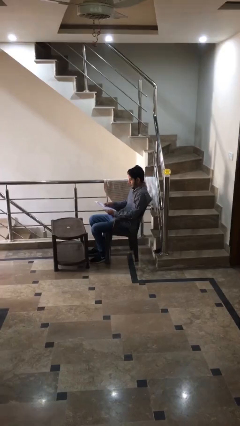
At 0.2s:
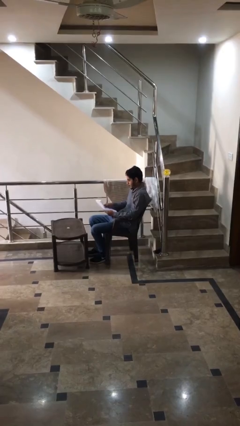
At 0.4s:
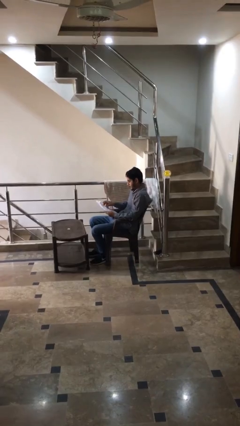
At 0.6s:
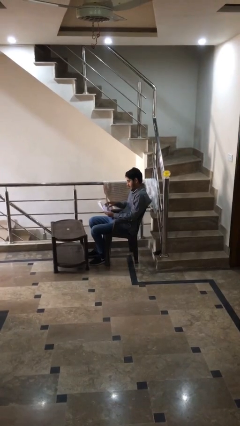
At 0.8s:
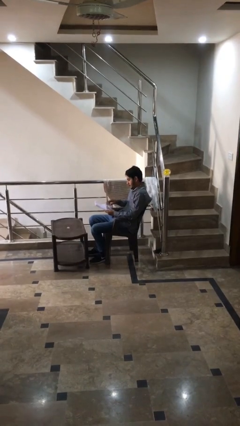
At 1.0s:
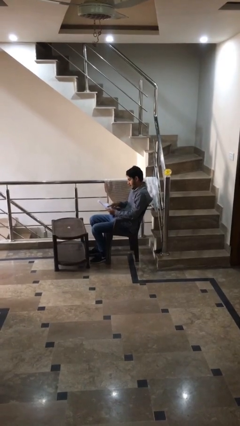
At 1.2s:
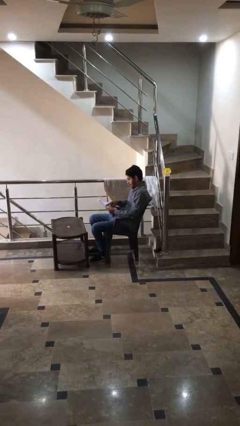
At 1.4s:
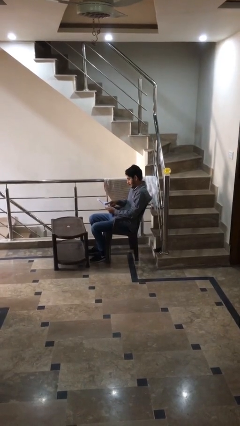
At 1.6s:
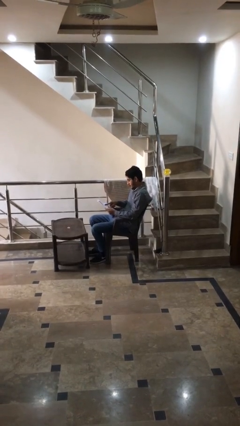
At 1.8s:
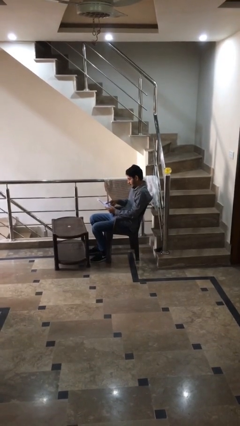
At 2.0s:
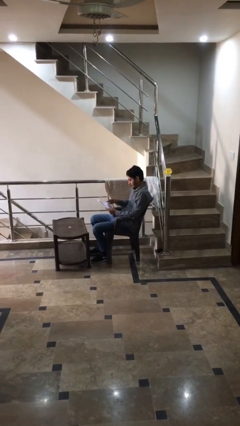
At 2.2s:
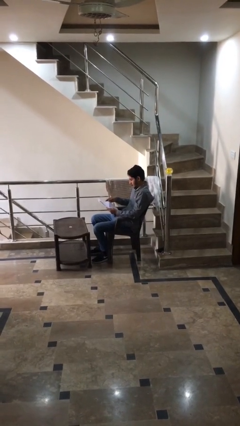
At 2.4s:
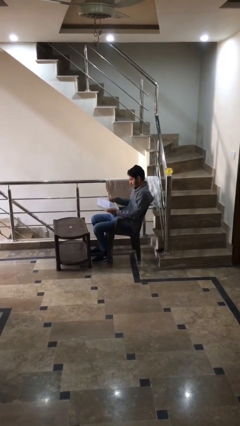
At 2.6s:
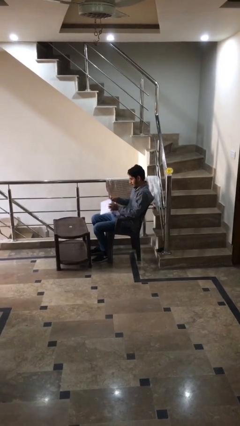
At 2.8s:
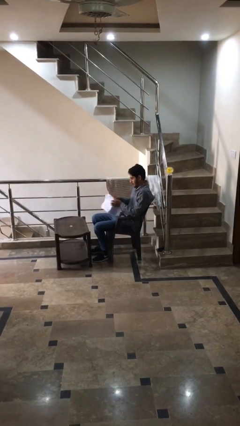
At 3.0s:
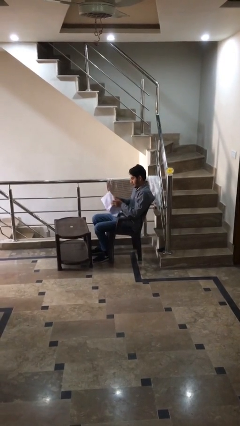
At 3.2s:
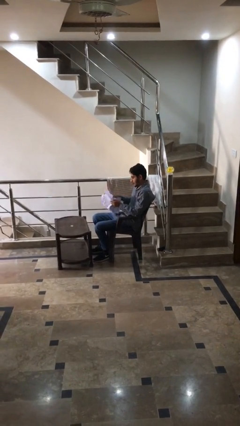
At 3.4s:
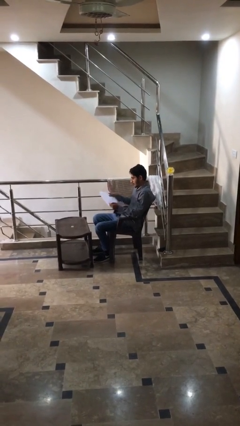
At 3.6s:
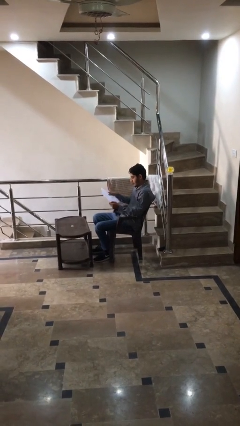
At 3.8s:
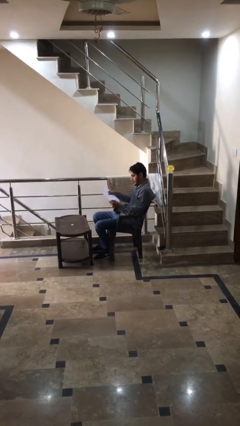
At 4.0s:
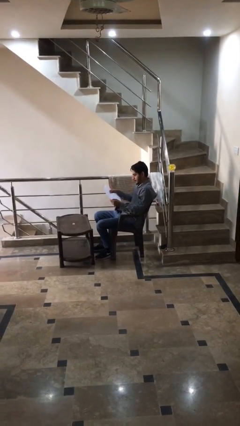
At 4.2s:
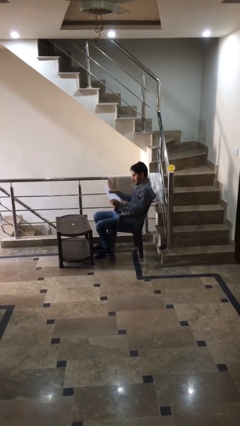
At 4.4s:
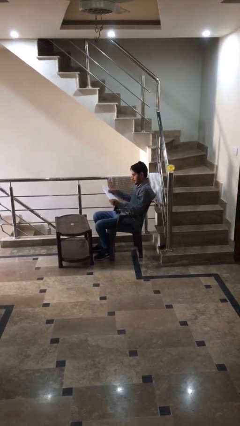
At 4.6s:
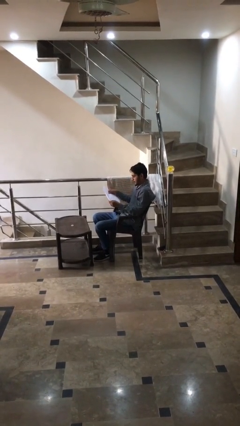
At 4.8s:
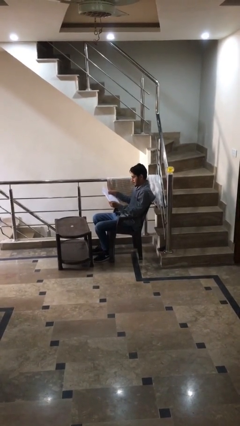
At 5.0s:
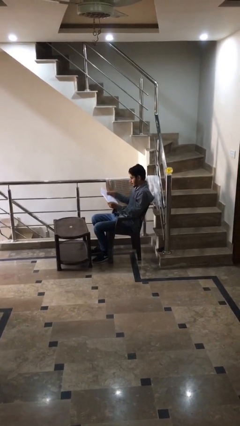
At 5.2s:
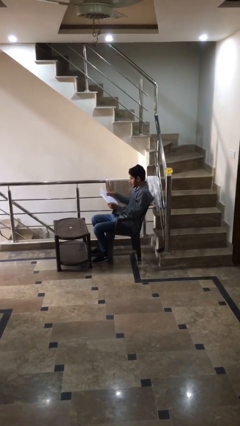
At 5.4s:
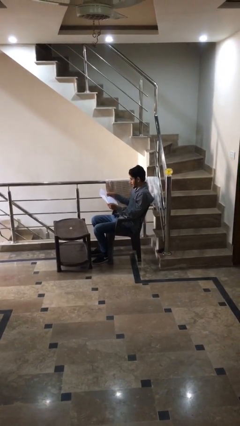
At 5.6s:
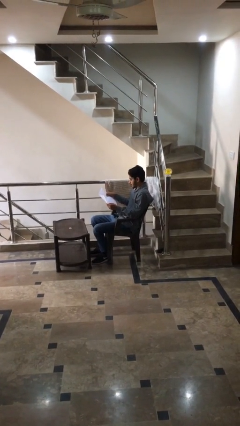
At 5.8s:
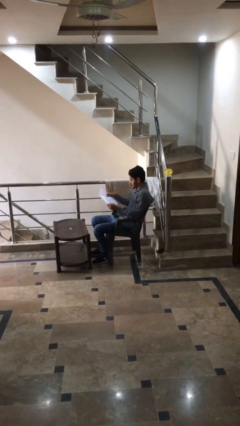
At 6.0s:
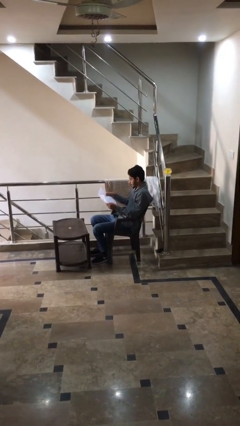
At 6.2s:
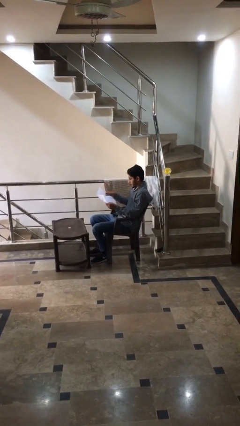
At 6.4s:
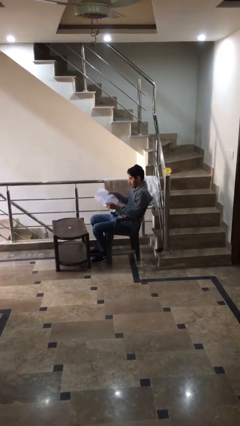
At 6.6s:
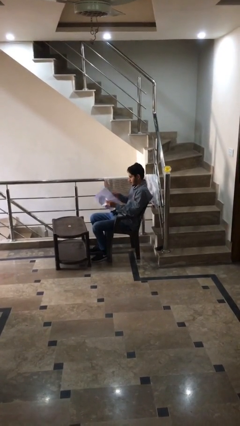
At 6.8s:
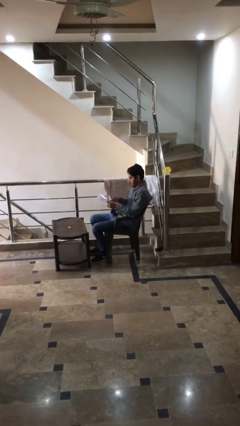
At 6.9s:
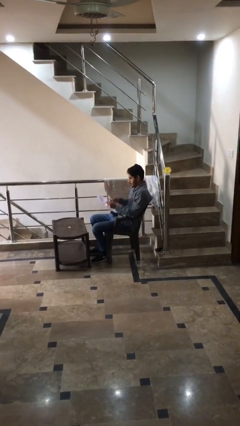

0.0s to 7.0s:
person reads document

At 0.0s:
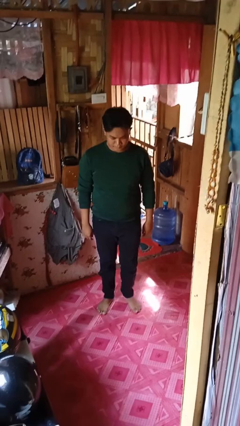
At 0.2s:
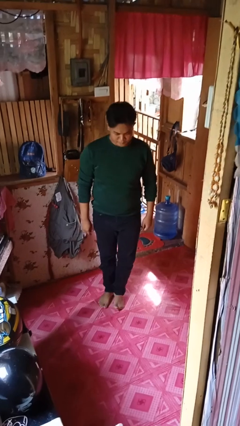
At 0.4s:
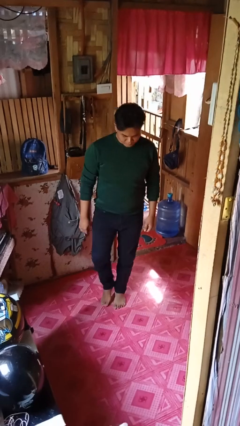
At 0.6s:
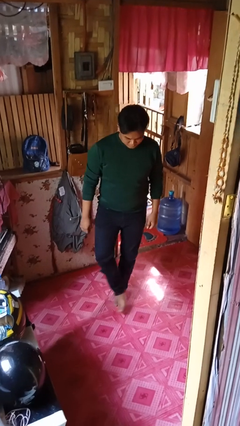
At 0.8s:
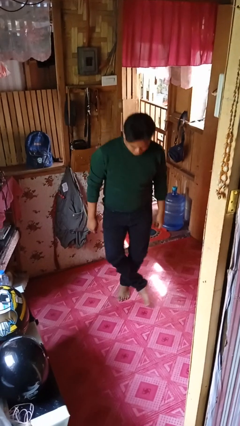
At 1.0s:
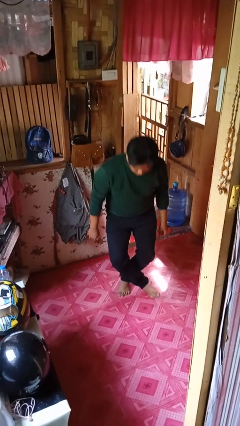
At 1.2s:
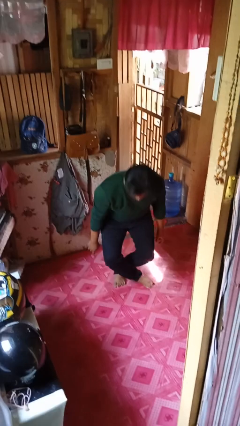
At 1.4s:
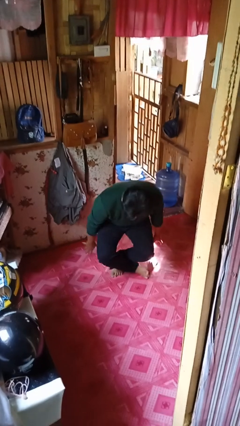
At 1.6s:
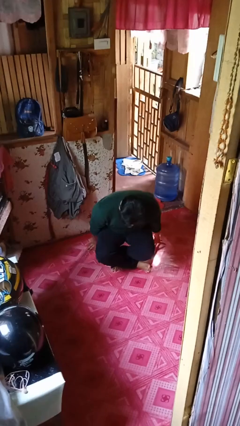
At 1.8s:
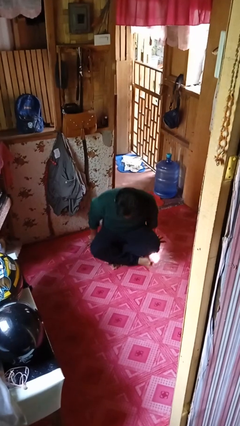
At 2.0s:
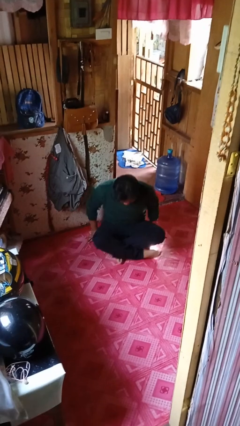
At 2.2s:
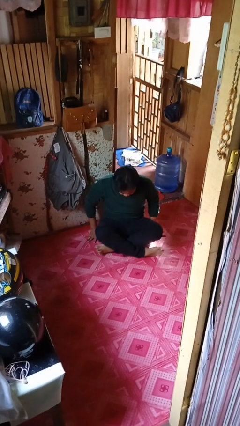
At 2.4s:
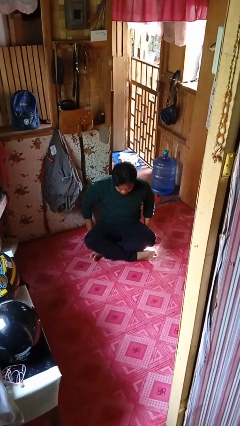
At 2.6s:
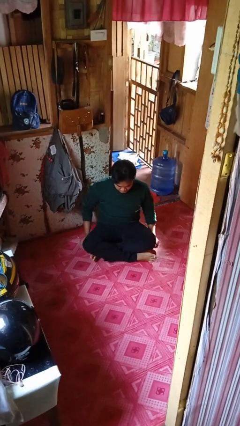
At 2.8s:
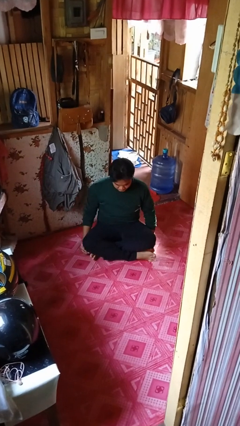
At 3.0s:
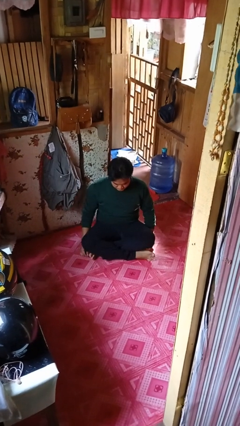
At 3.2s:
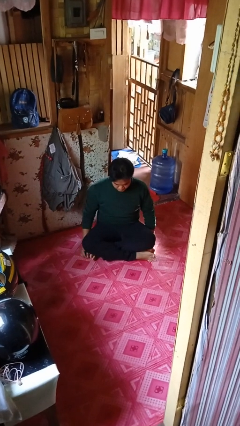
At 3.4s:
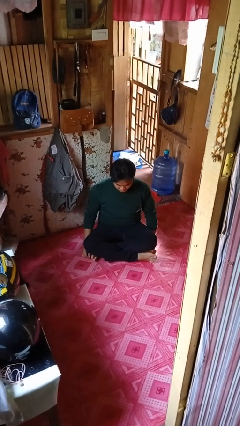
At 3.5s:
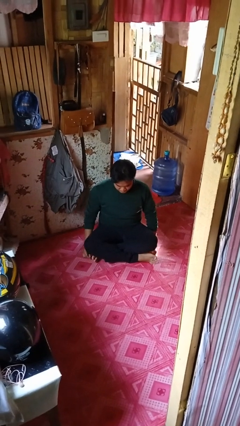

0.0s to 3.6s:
person sits crisscross

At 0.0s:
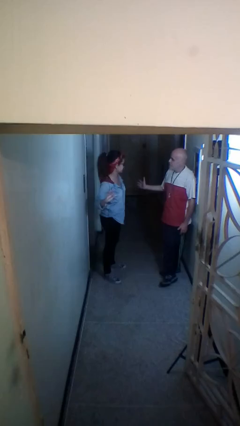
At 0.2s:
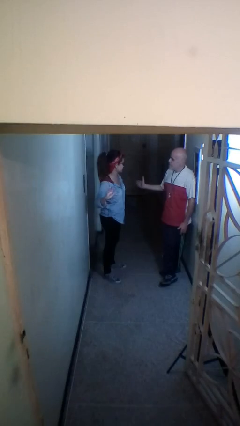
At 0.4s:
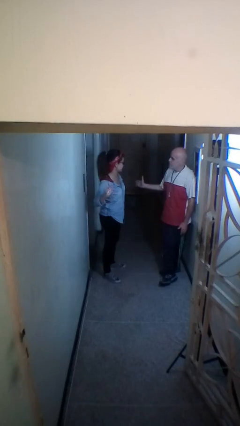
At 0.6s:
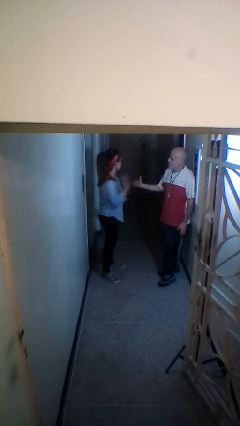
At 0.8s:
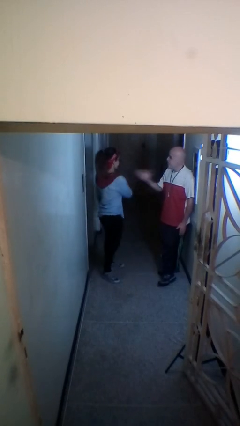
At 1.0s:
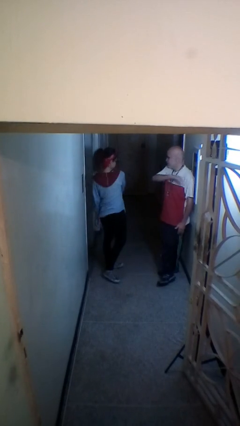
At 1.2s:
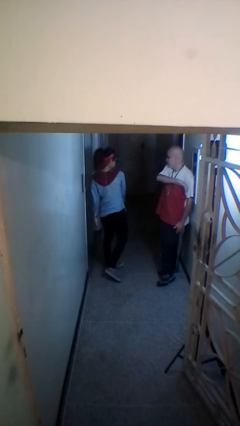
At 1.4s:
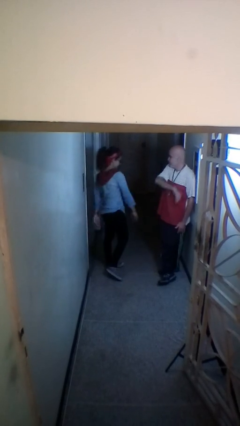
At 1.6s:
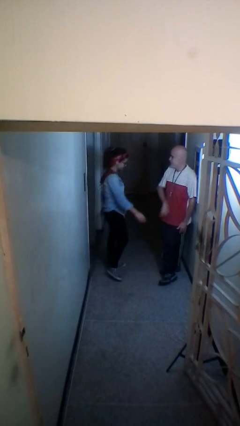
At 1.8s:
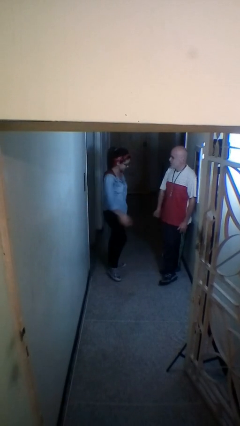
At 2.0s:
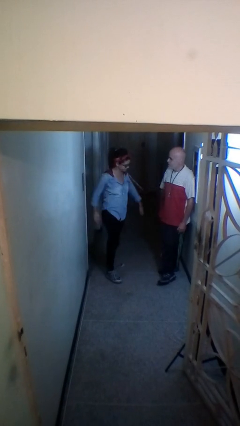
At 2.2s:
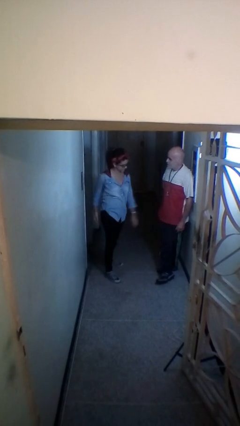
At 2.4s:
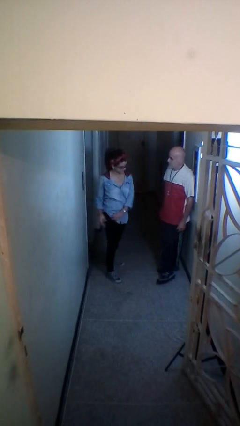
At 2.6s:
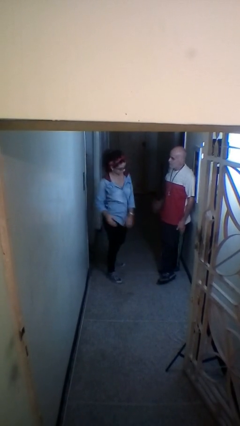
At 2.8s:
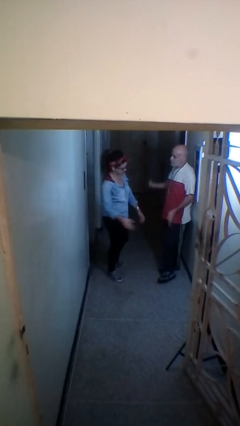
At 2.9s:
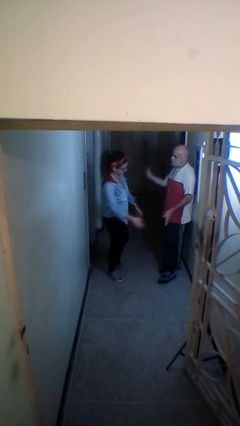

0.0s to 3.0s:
person highfives hand

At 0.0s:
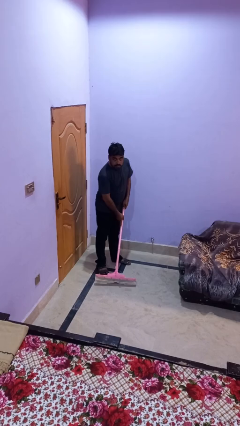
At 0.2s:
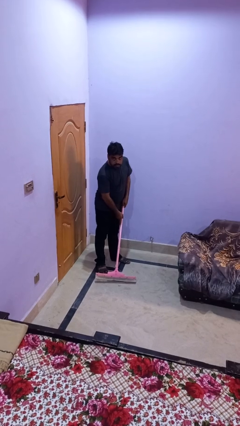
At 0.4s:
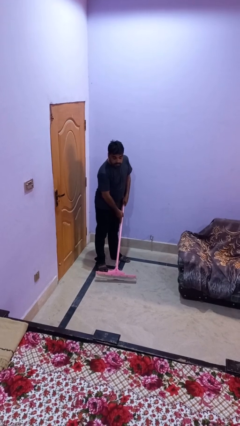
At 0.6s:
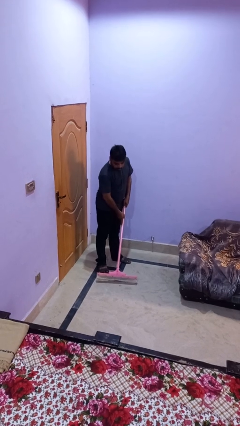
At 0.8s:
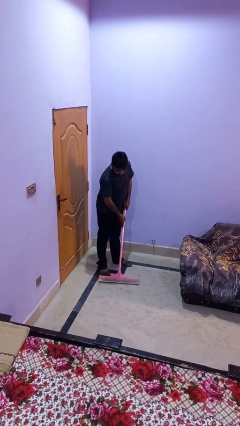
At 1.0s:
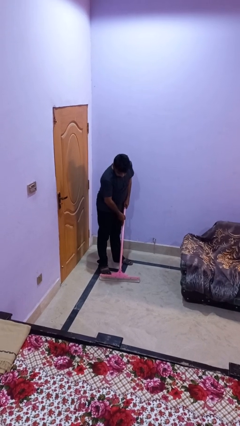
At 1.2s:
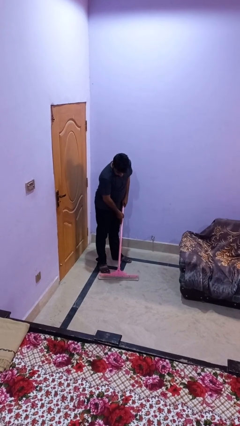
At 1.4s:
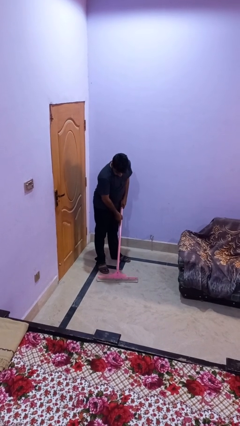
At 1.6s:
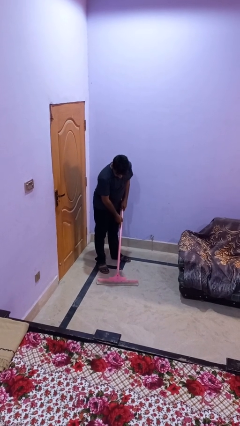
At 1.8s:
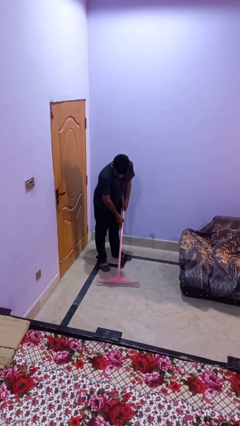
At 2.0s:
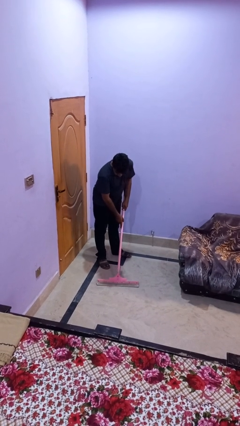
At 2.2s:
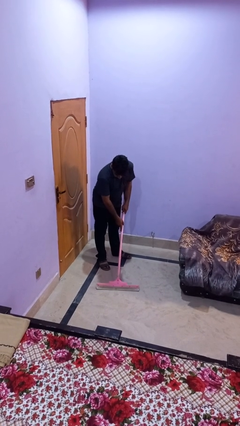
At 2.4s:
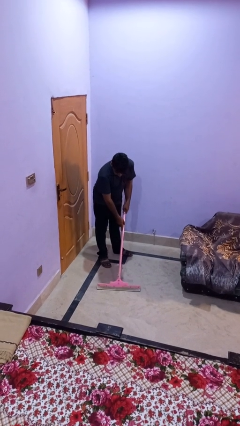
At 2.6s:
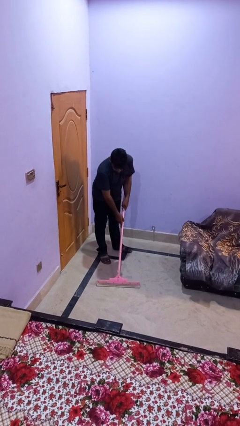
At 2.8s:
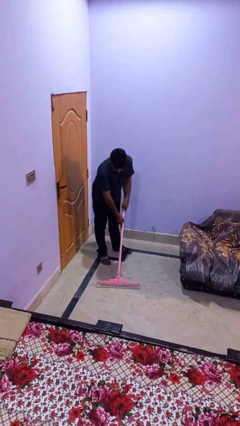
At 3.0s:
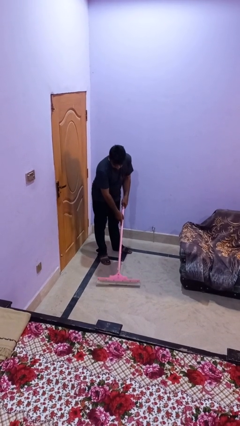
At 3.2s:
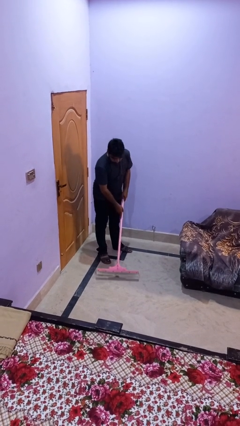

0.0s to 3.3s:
person vacuums carpet

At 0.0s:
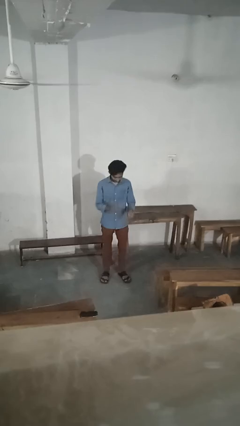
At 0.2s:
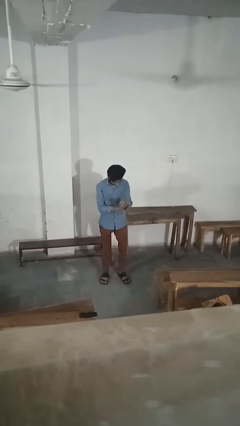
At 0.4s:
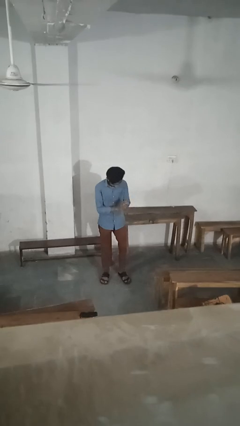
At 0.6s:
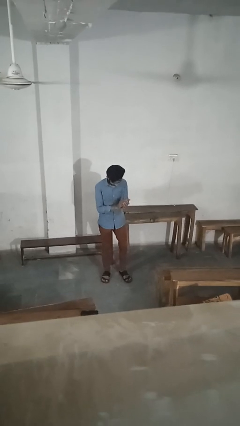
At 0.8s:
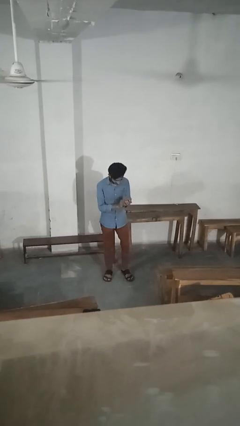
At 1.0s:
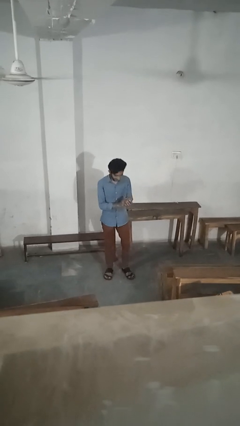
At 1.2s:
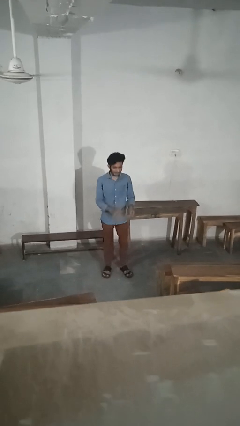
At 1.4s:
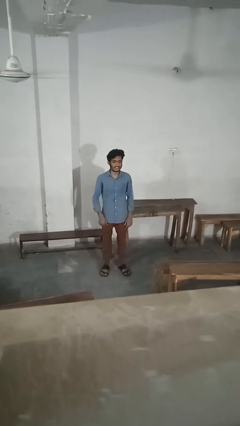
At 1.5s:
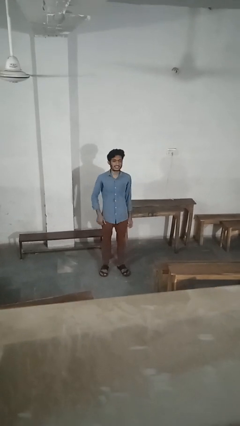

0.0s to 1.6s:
person claps hands
